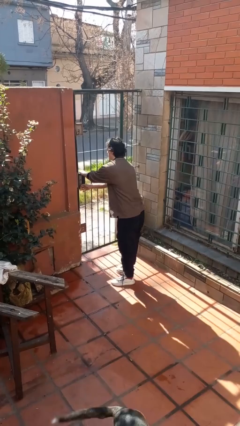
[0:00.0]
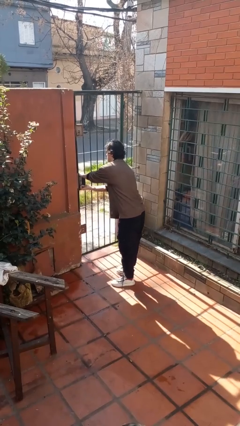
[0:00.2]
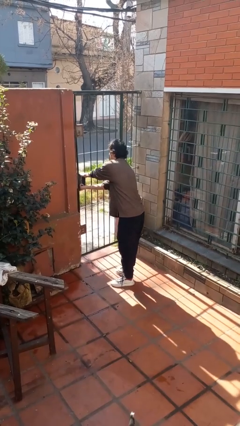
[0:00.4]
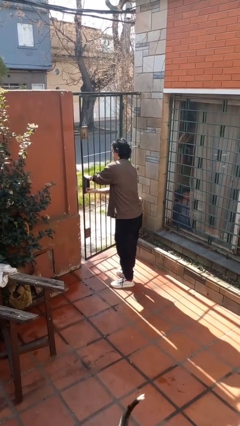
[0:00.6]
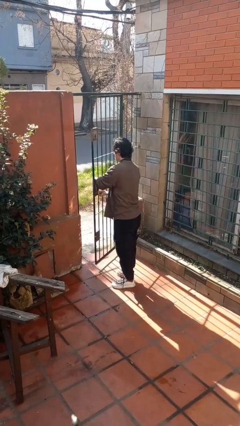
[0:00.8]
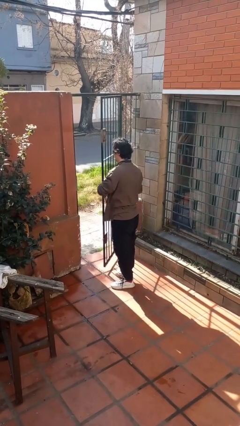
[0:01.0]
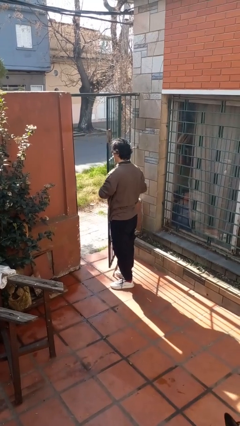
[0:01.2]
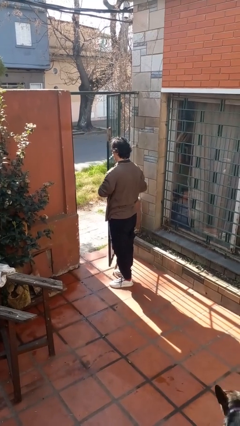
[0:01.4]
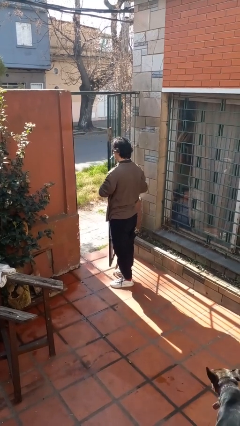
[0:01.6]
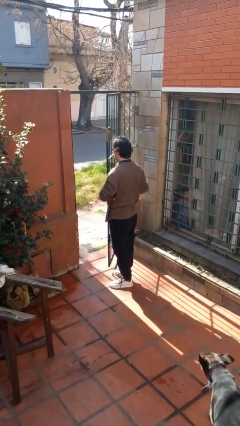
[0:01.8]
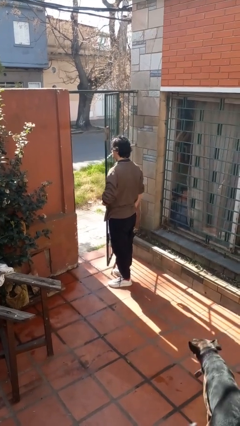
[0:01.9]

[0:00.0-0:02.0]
person opens gate

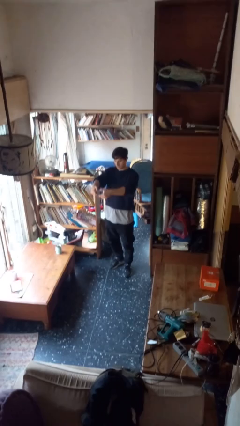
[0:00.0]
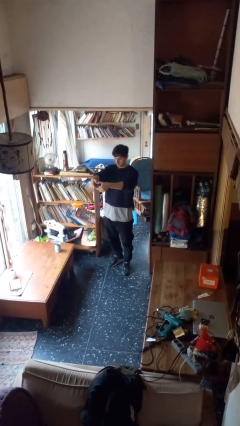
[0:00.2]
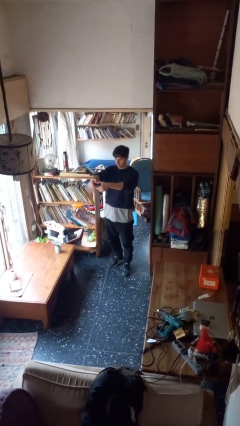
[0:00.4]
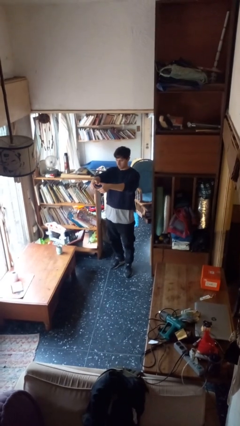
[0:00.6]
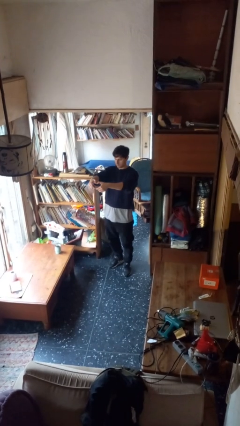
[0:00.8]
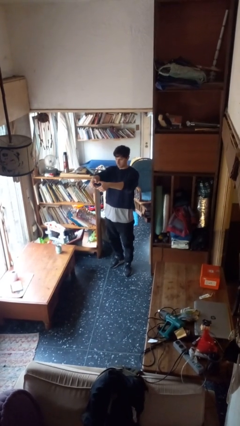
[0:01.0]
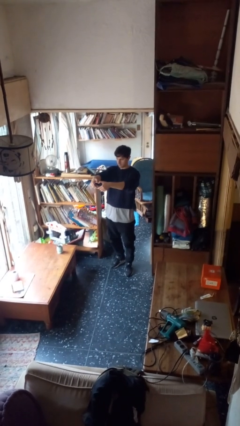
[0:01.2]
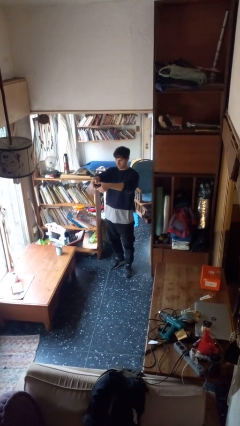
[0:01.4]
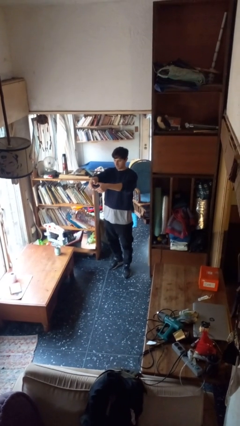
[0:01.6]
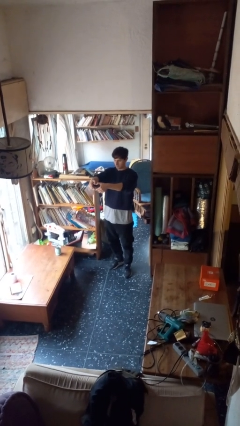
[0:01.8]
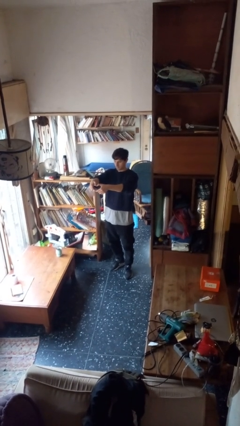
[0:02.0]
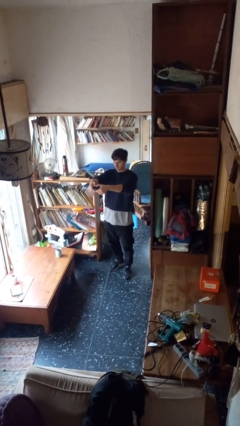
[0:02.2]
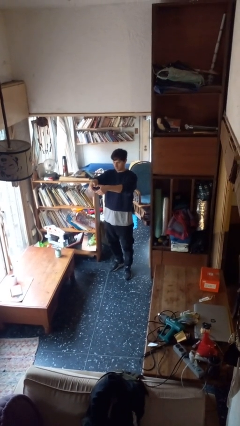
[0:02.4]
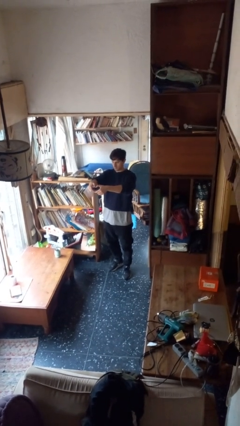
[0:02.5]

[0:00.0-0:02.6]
person gestures heart

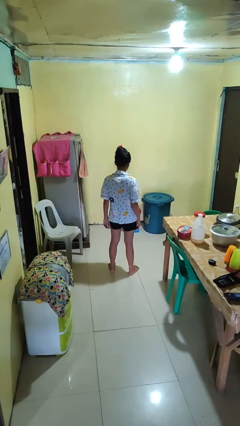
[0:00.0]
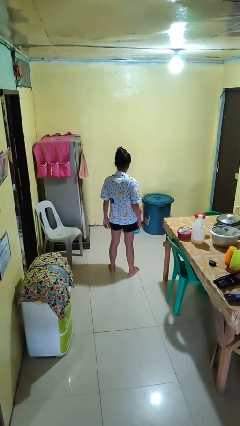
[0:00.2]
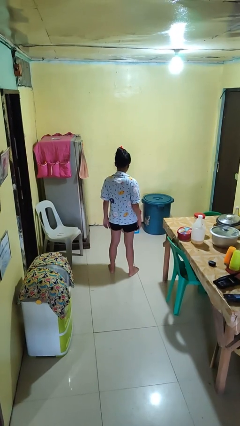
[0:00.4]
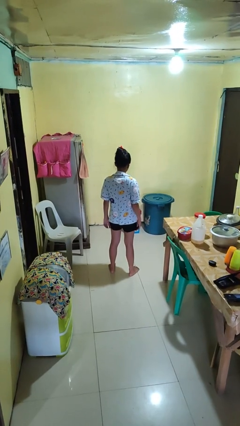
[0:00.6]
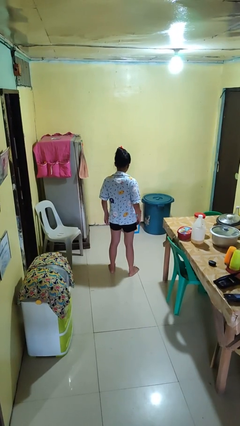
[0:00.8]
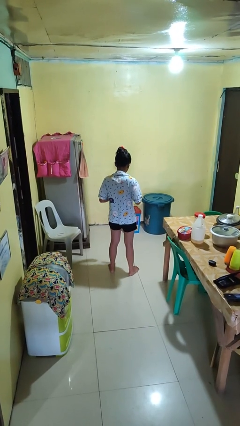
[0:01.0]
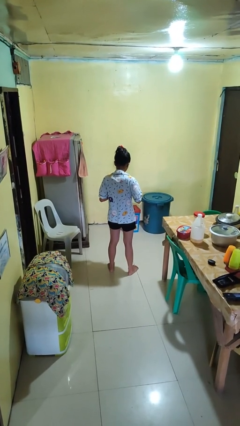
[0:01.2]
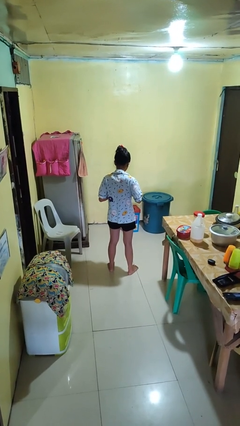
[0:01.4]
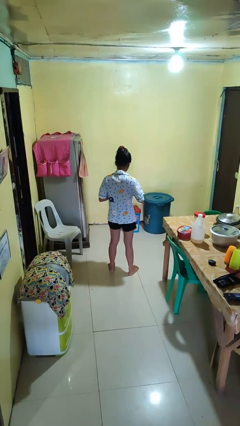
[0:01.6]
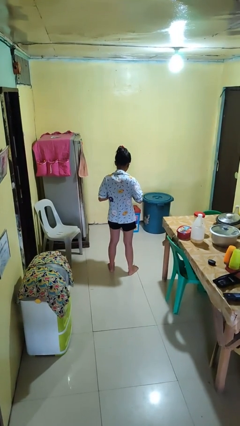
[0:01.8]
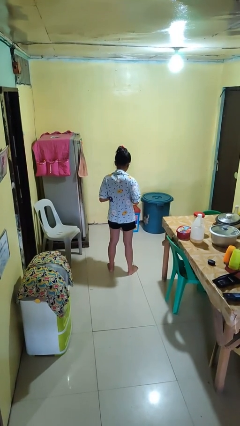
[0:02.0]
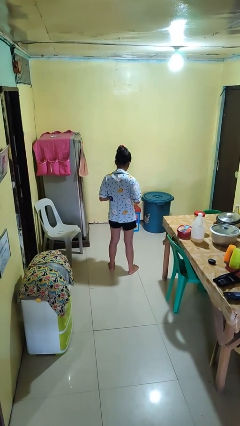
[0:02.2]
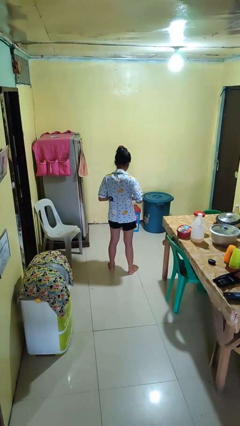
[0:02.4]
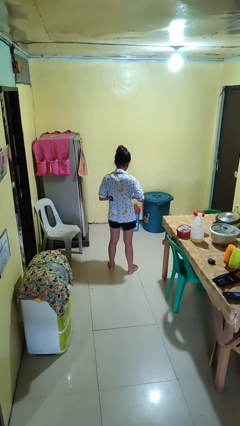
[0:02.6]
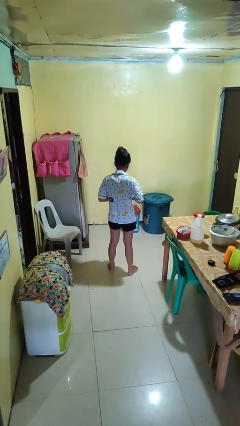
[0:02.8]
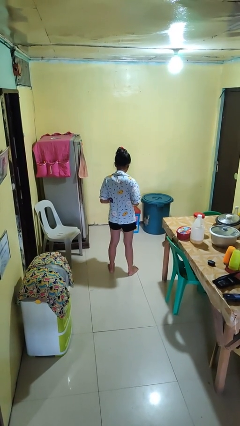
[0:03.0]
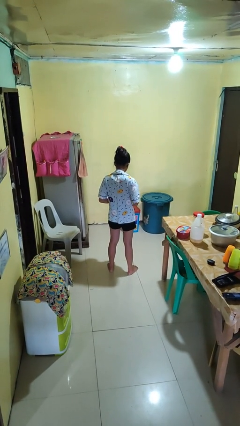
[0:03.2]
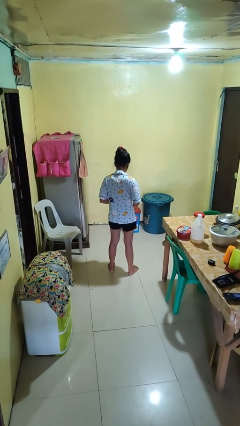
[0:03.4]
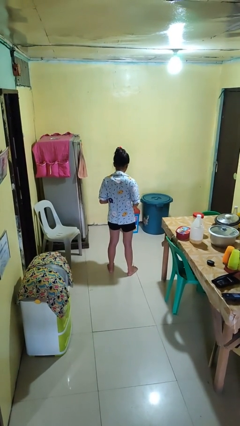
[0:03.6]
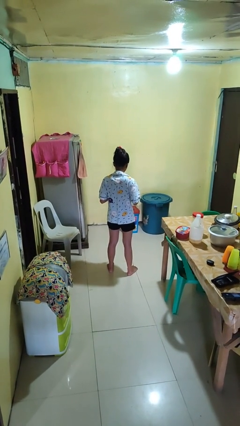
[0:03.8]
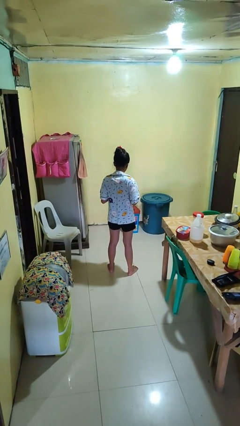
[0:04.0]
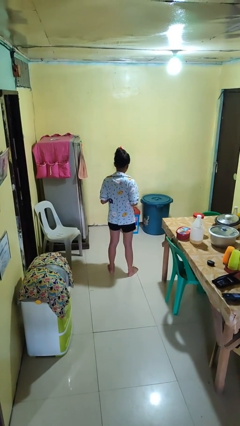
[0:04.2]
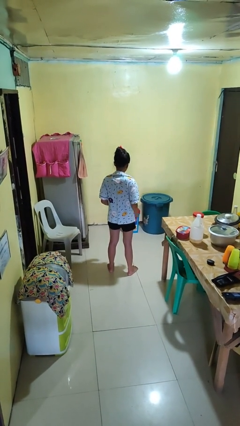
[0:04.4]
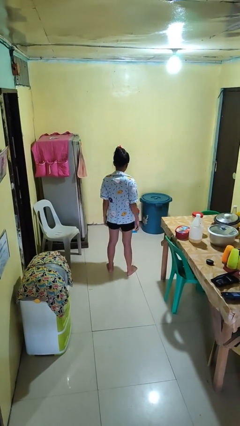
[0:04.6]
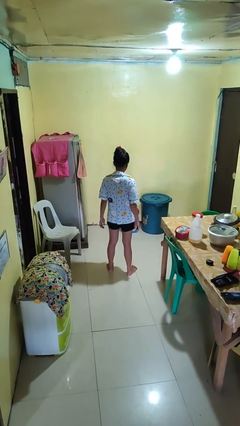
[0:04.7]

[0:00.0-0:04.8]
person unbuttons shirt

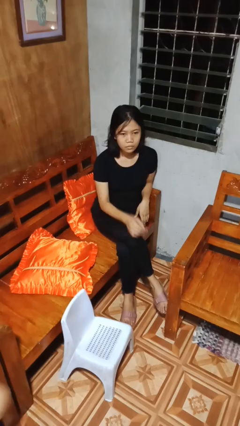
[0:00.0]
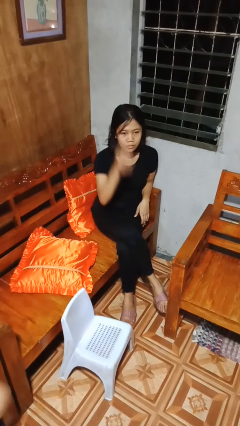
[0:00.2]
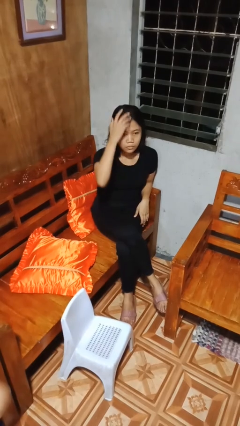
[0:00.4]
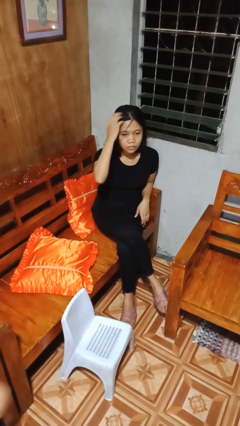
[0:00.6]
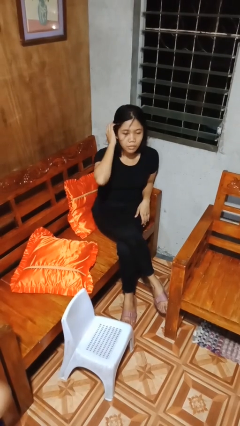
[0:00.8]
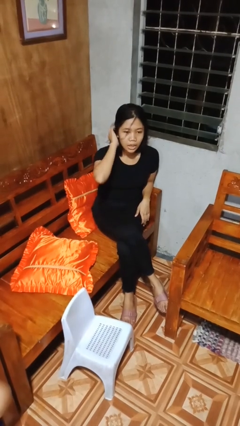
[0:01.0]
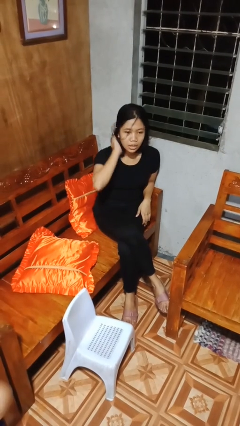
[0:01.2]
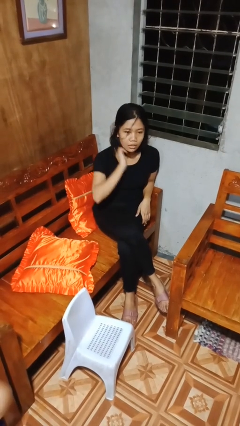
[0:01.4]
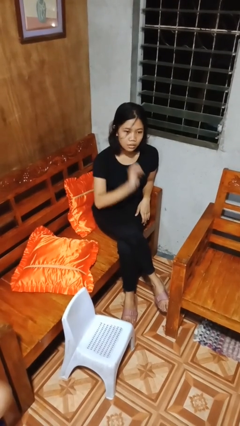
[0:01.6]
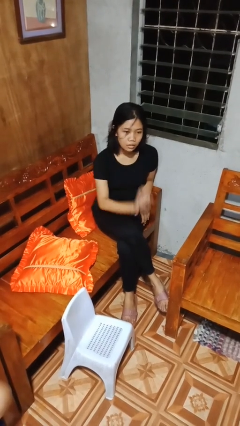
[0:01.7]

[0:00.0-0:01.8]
person strokes hair

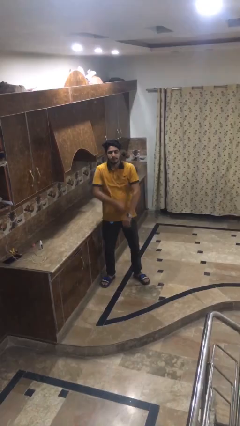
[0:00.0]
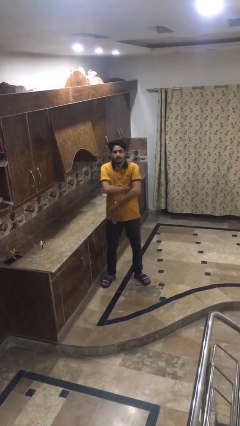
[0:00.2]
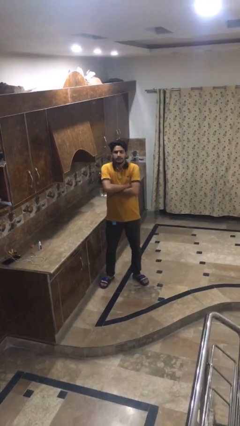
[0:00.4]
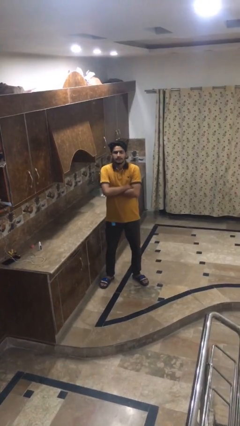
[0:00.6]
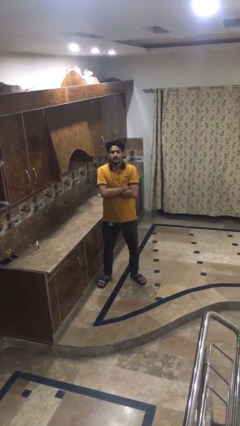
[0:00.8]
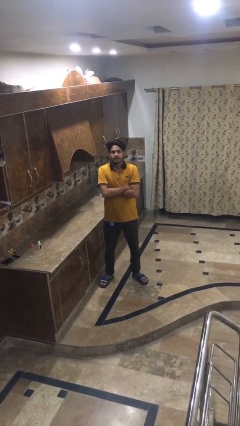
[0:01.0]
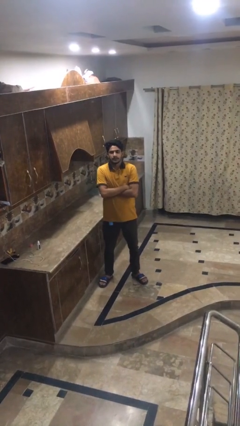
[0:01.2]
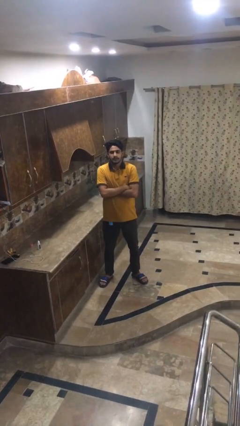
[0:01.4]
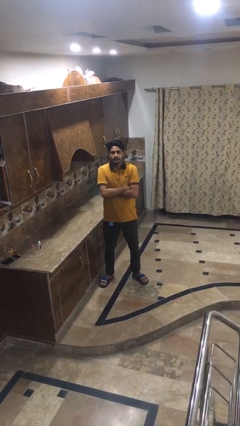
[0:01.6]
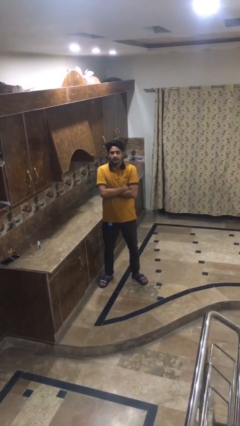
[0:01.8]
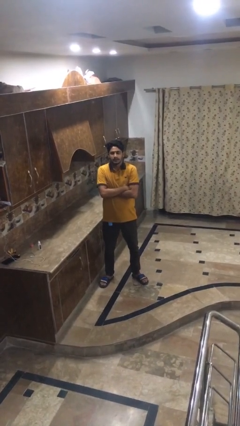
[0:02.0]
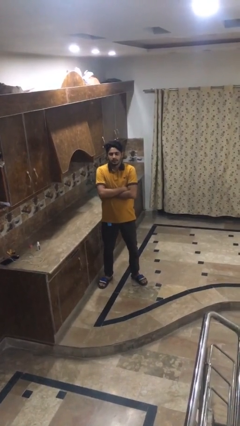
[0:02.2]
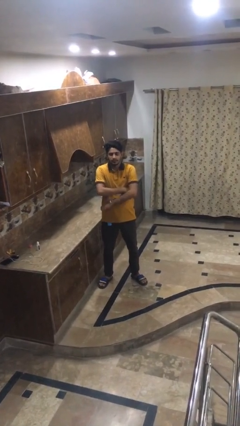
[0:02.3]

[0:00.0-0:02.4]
person crosses arms

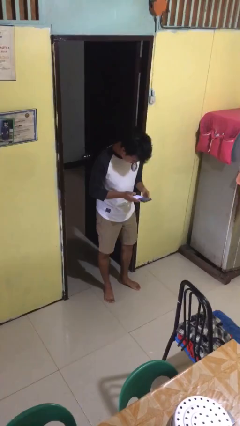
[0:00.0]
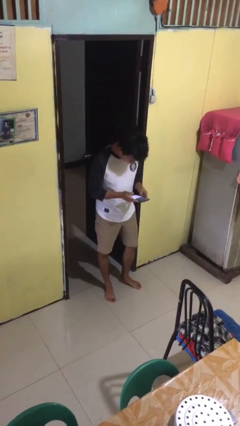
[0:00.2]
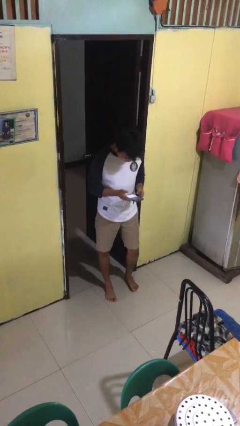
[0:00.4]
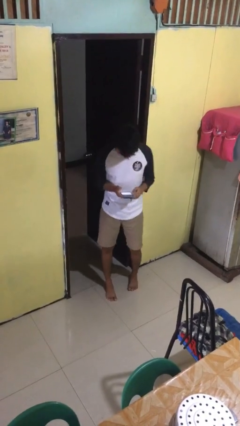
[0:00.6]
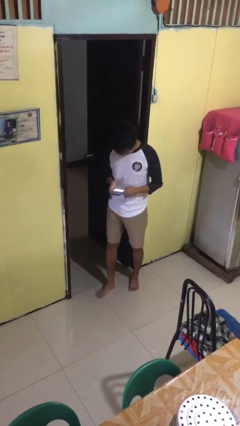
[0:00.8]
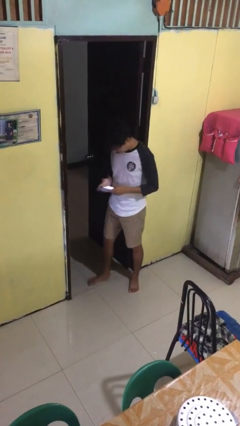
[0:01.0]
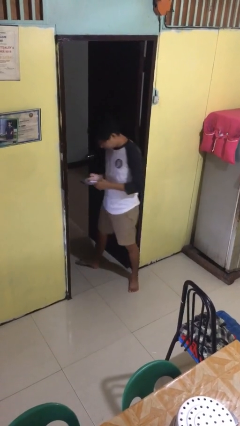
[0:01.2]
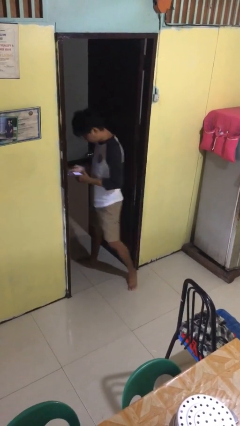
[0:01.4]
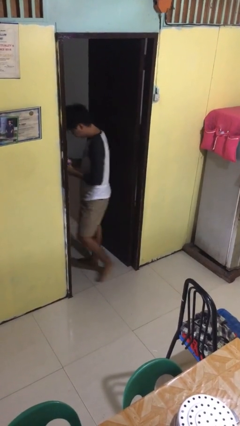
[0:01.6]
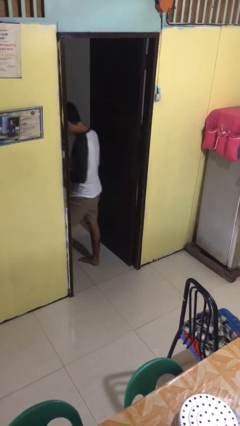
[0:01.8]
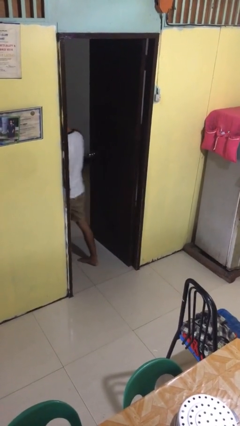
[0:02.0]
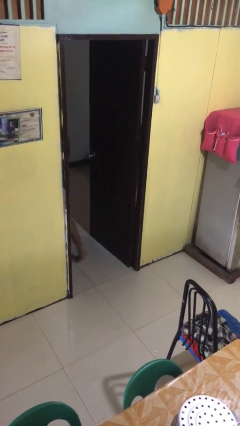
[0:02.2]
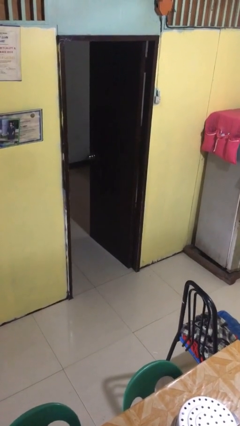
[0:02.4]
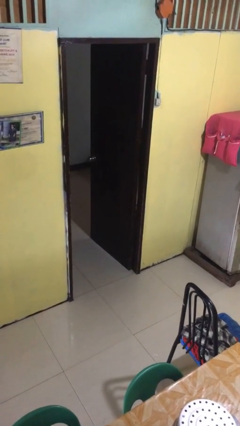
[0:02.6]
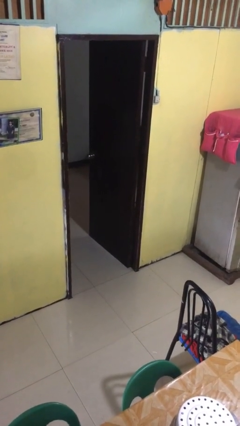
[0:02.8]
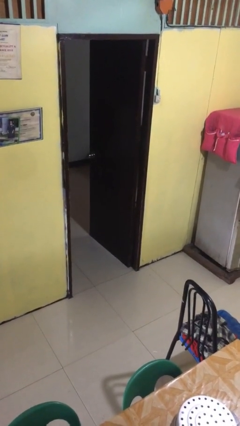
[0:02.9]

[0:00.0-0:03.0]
person exits scene through structure

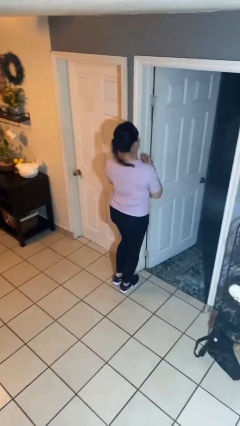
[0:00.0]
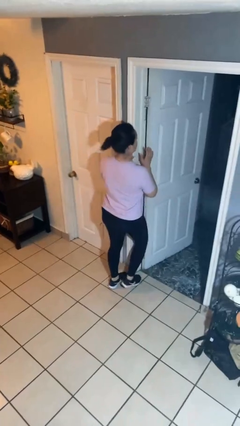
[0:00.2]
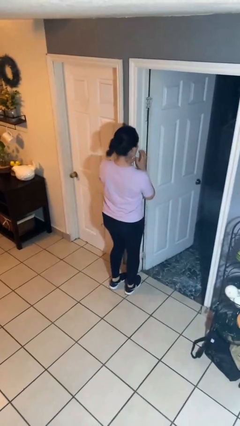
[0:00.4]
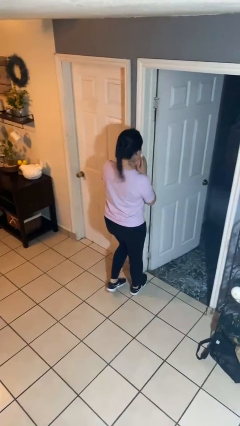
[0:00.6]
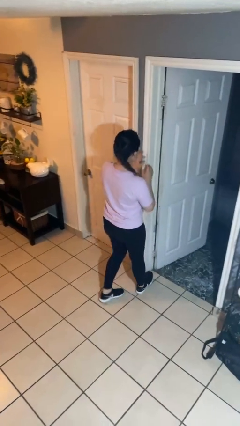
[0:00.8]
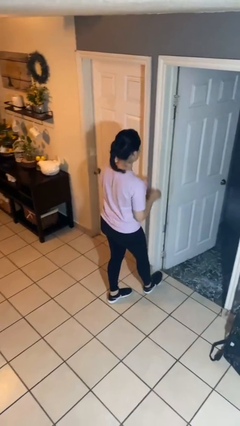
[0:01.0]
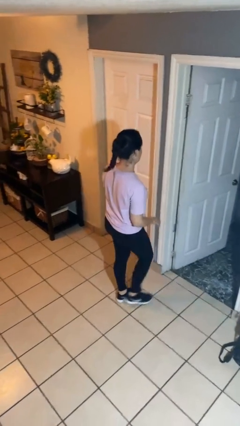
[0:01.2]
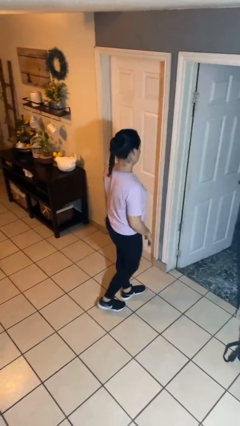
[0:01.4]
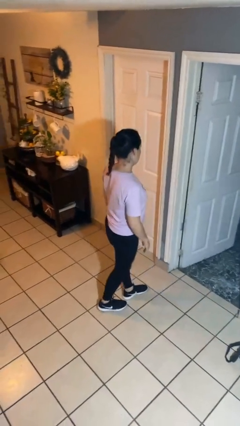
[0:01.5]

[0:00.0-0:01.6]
person bumps into wall
